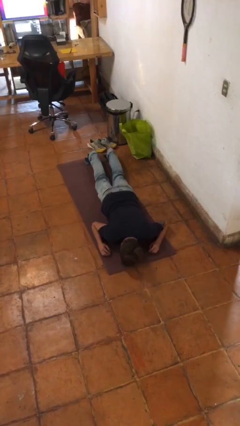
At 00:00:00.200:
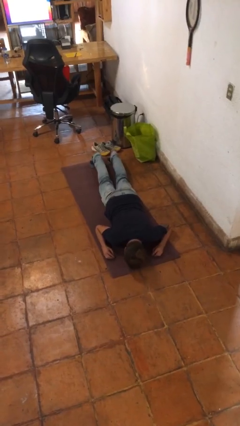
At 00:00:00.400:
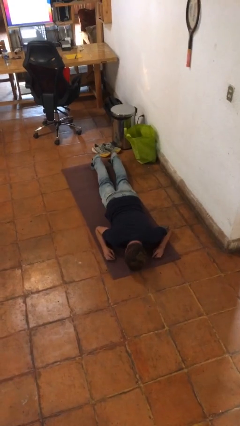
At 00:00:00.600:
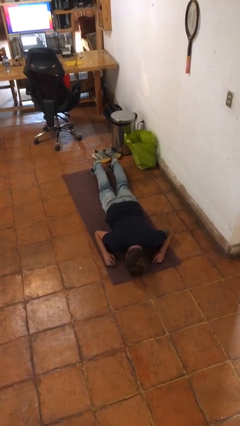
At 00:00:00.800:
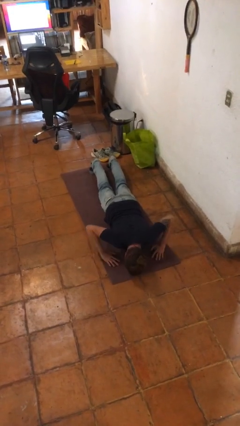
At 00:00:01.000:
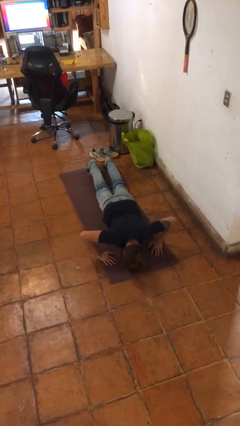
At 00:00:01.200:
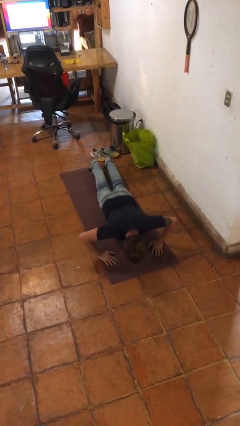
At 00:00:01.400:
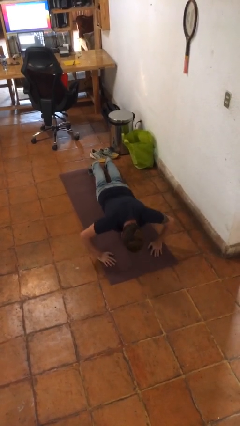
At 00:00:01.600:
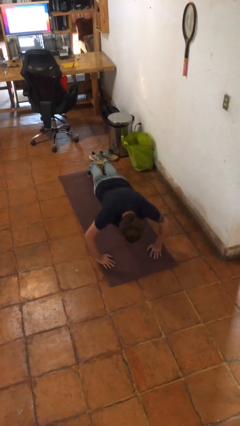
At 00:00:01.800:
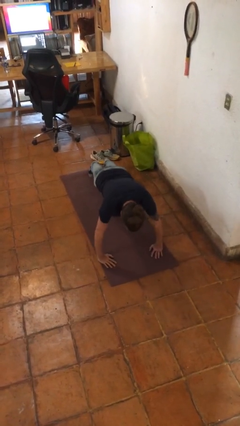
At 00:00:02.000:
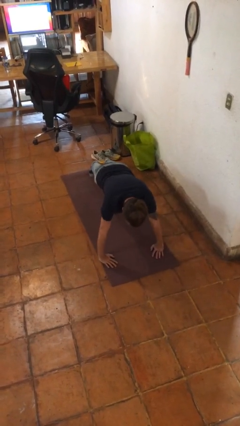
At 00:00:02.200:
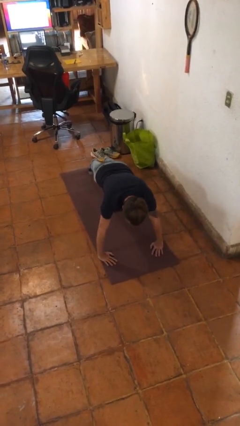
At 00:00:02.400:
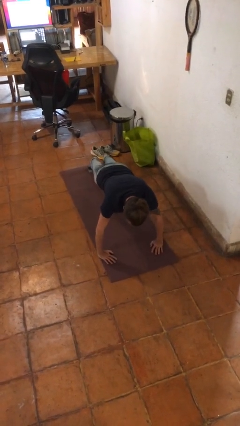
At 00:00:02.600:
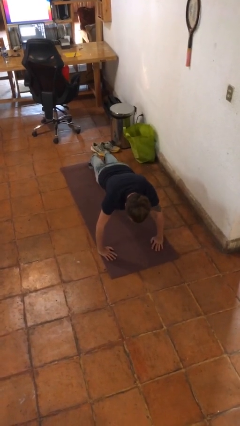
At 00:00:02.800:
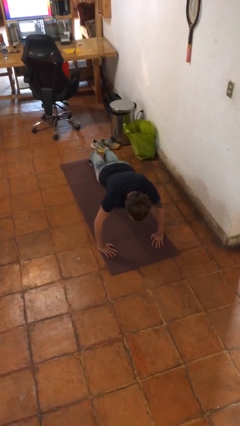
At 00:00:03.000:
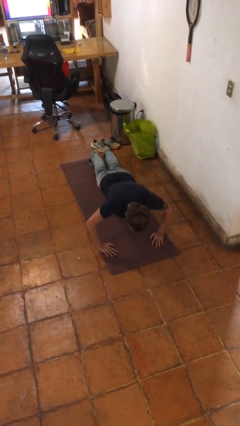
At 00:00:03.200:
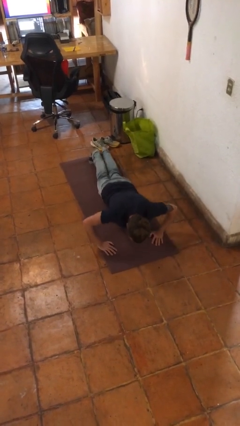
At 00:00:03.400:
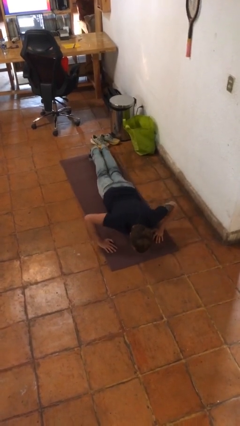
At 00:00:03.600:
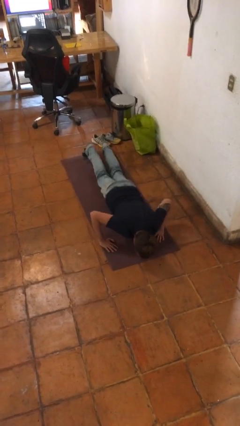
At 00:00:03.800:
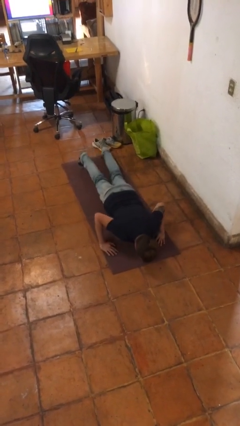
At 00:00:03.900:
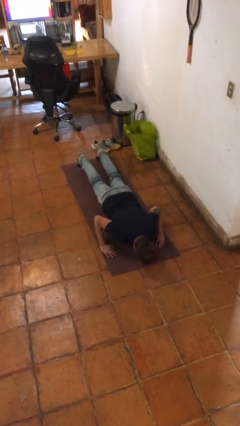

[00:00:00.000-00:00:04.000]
person exercises with pushup

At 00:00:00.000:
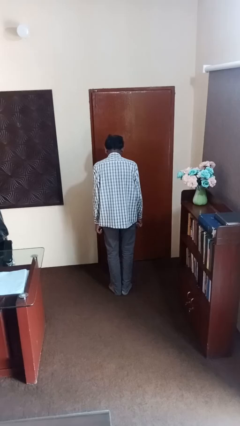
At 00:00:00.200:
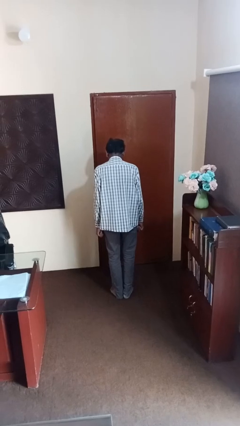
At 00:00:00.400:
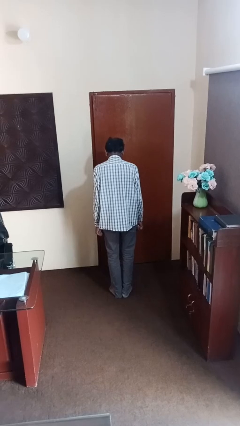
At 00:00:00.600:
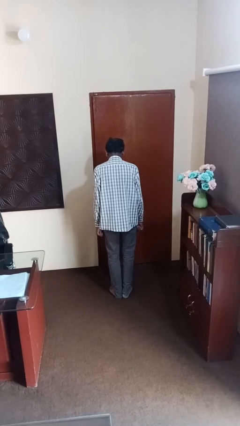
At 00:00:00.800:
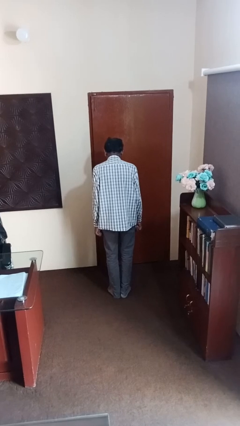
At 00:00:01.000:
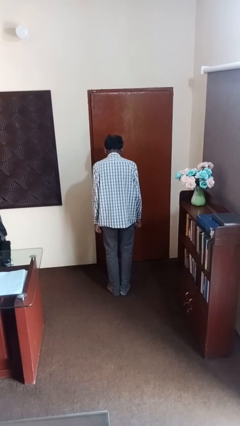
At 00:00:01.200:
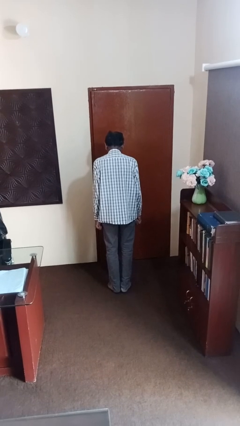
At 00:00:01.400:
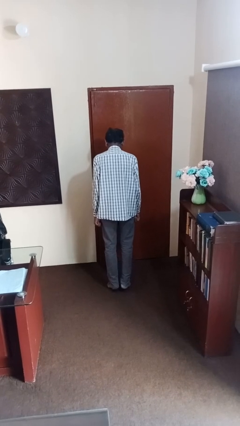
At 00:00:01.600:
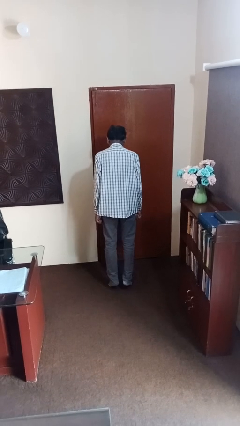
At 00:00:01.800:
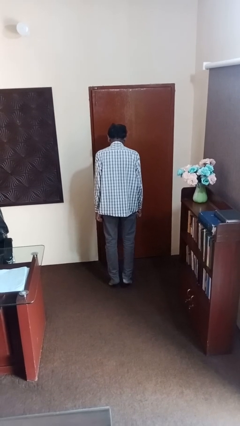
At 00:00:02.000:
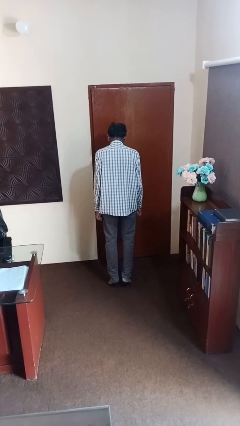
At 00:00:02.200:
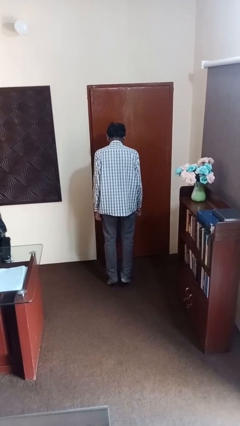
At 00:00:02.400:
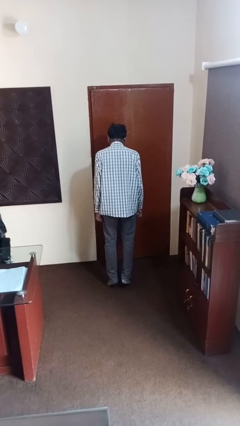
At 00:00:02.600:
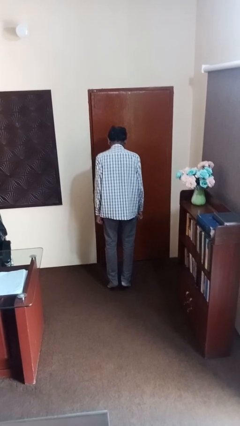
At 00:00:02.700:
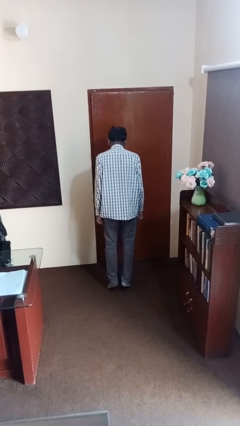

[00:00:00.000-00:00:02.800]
person walks tiptoe

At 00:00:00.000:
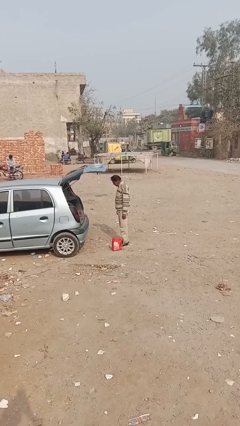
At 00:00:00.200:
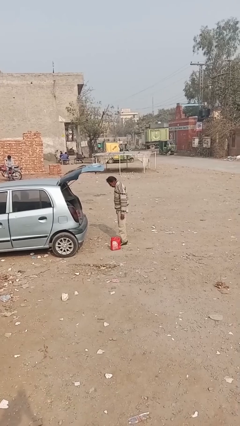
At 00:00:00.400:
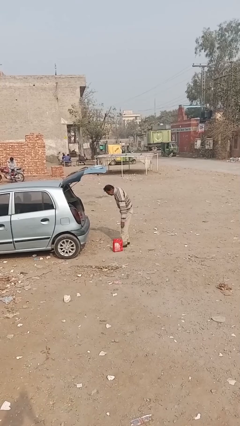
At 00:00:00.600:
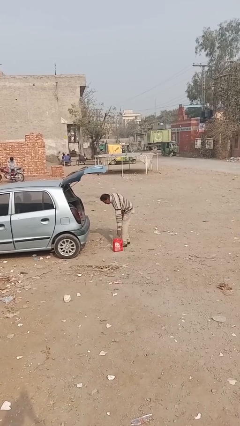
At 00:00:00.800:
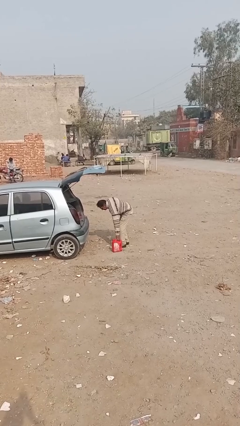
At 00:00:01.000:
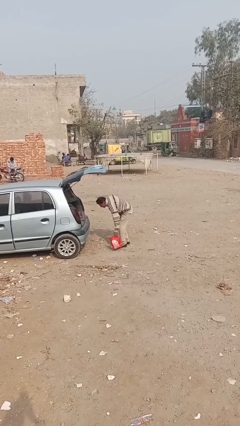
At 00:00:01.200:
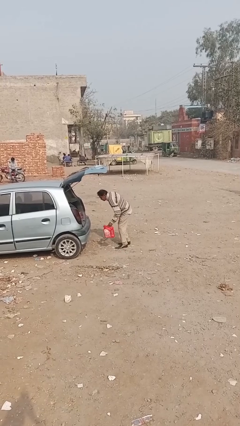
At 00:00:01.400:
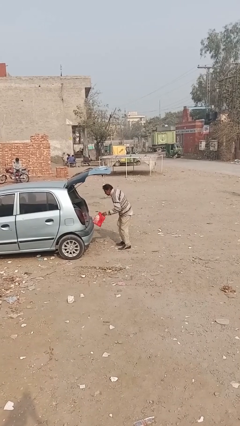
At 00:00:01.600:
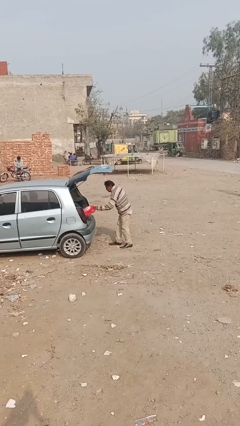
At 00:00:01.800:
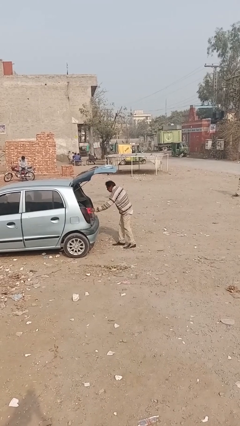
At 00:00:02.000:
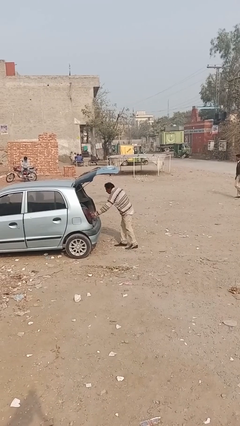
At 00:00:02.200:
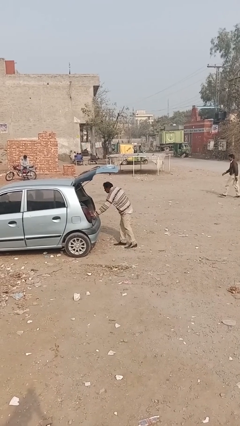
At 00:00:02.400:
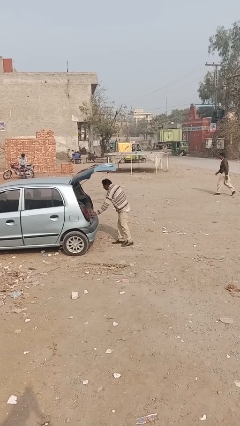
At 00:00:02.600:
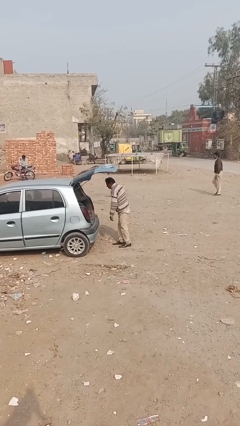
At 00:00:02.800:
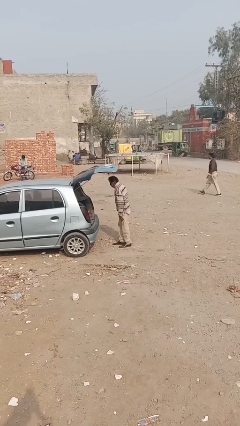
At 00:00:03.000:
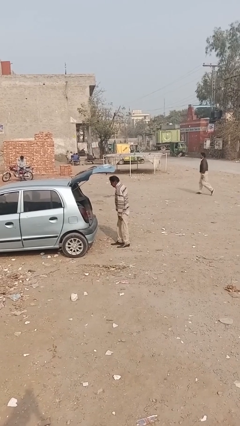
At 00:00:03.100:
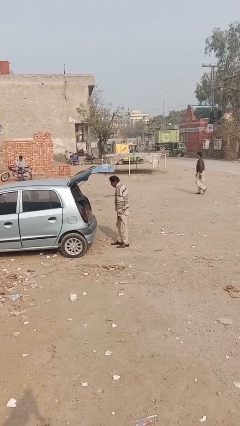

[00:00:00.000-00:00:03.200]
person loads car

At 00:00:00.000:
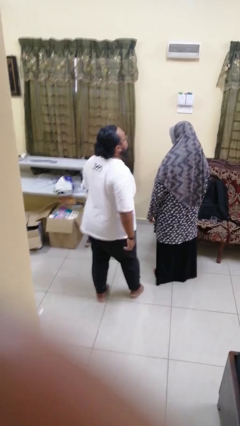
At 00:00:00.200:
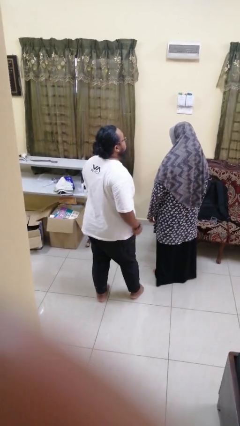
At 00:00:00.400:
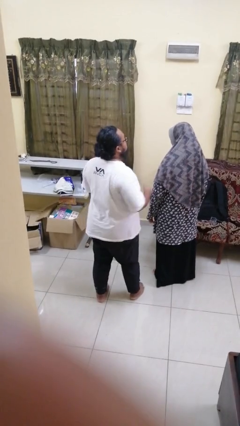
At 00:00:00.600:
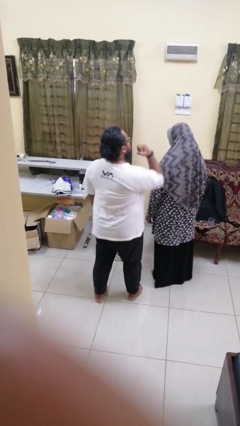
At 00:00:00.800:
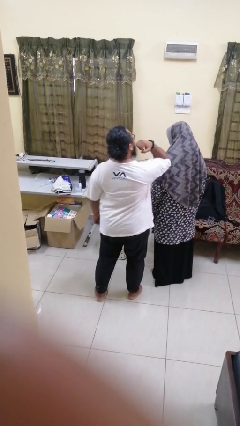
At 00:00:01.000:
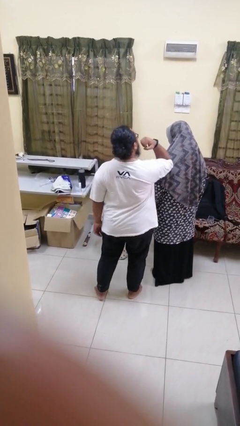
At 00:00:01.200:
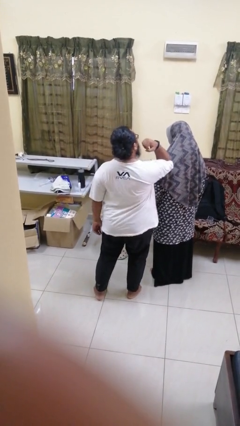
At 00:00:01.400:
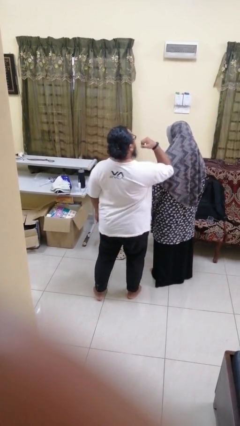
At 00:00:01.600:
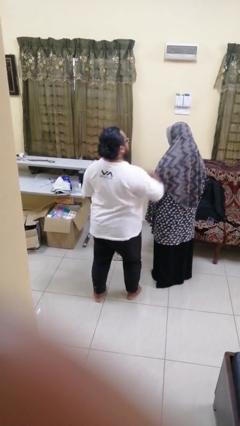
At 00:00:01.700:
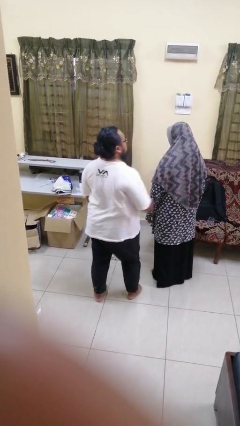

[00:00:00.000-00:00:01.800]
person nudges person with elbow

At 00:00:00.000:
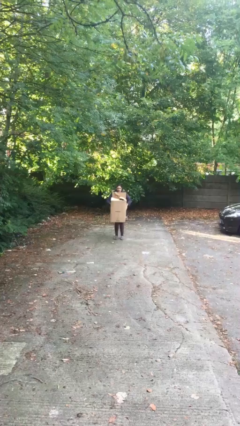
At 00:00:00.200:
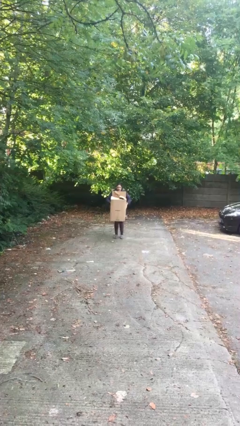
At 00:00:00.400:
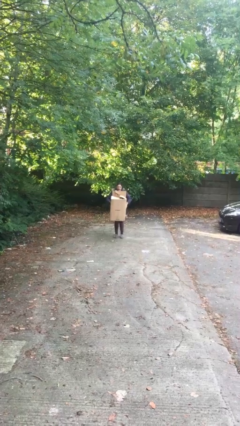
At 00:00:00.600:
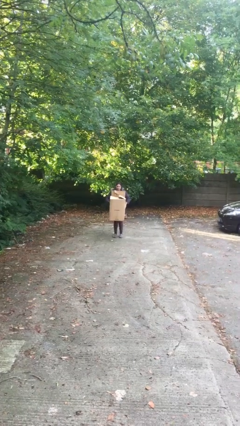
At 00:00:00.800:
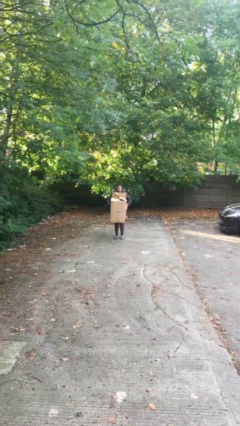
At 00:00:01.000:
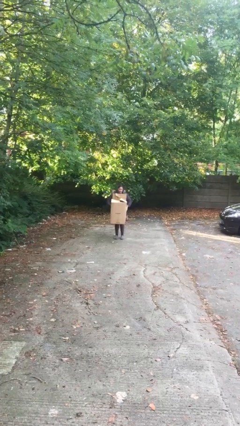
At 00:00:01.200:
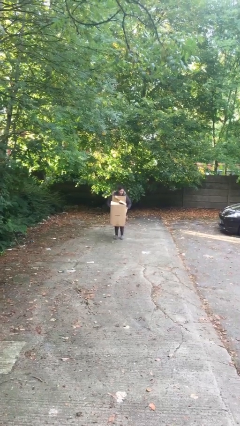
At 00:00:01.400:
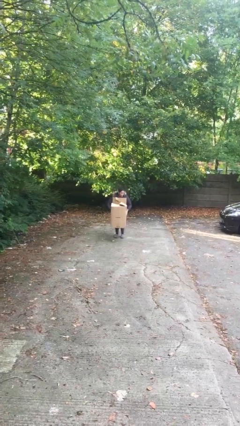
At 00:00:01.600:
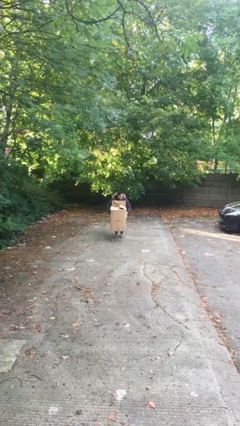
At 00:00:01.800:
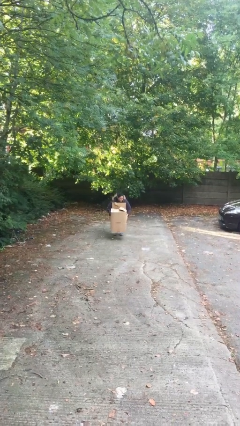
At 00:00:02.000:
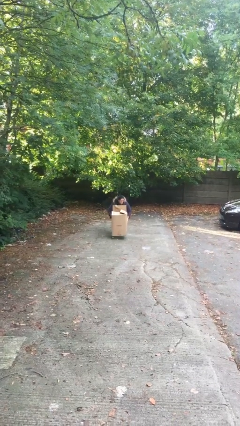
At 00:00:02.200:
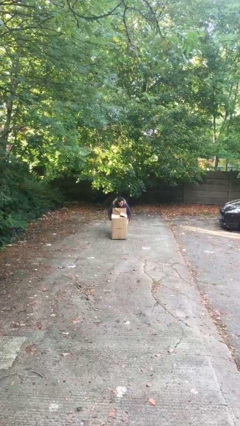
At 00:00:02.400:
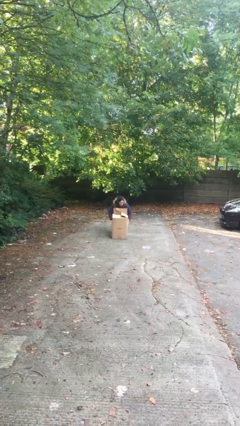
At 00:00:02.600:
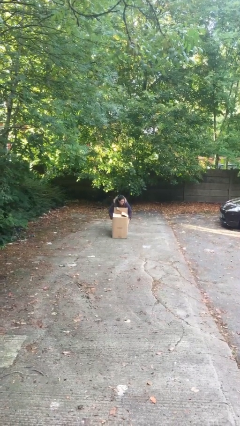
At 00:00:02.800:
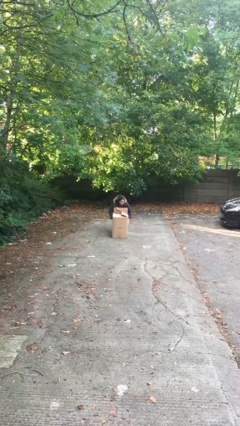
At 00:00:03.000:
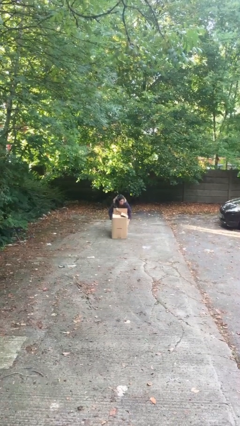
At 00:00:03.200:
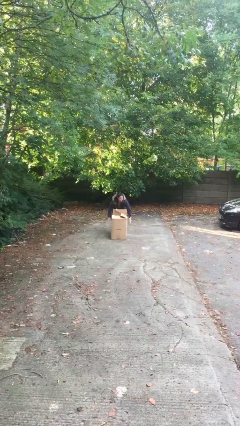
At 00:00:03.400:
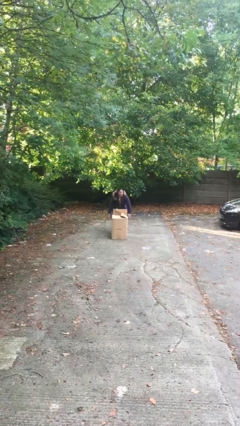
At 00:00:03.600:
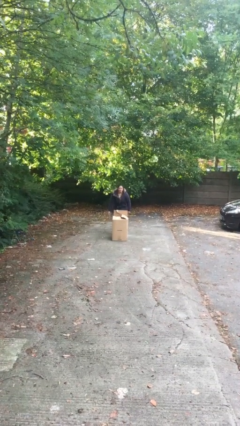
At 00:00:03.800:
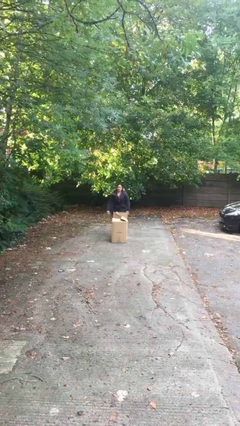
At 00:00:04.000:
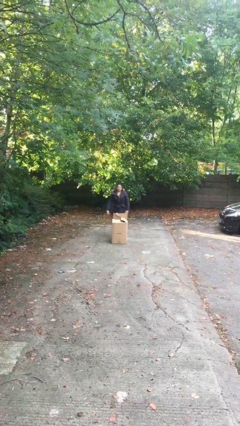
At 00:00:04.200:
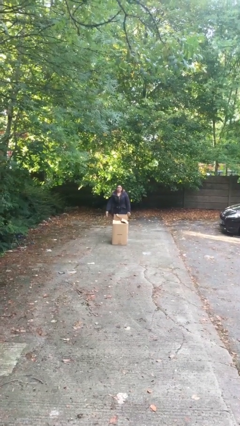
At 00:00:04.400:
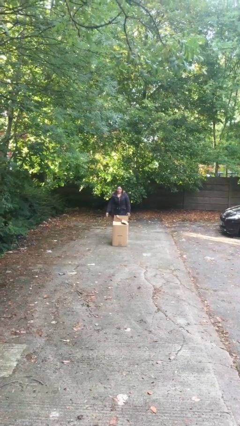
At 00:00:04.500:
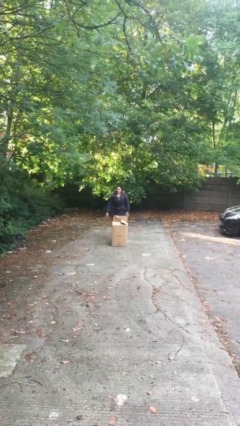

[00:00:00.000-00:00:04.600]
person puts down object on floor

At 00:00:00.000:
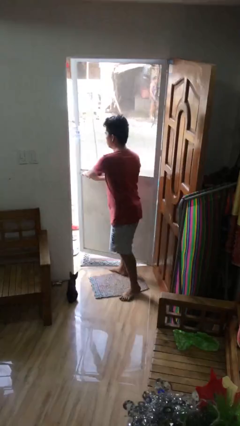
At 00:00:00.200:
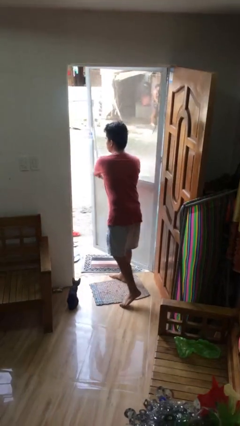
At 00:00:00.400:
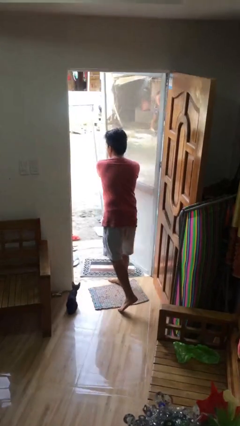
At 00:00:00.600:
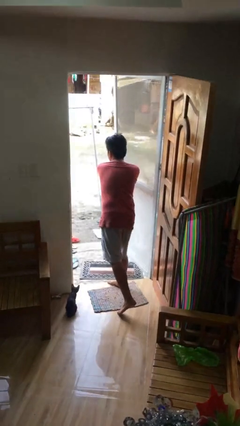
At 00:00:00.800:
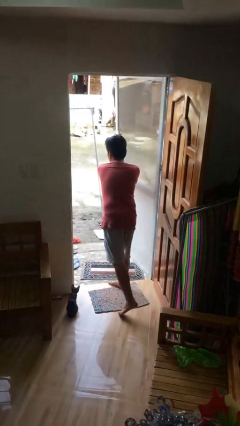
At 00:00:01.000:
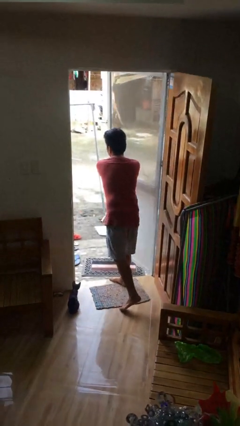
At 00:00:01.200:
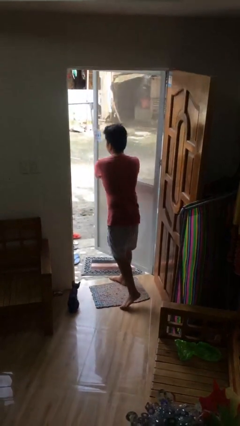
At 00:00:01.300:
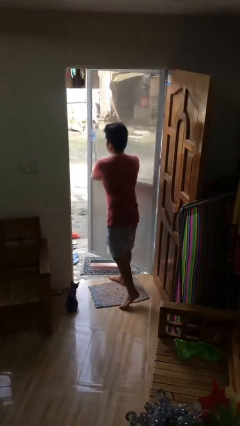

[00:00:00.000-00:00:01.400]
person opens facility door
